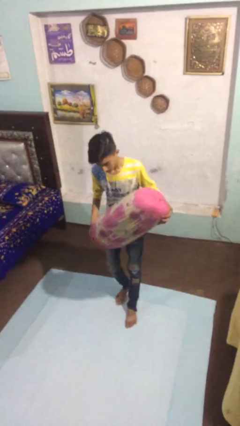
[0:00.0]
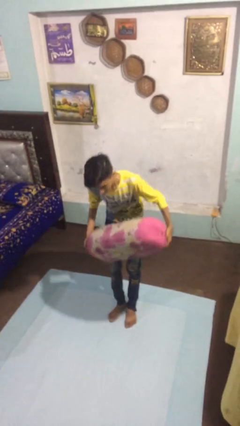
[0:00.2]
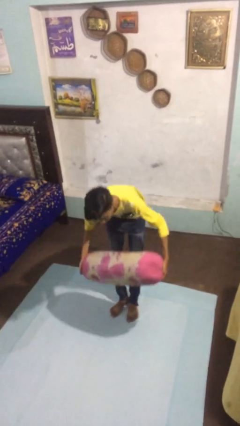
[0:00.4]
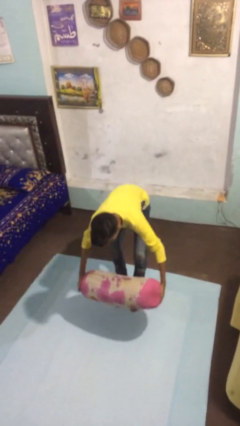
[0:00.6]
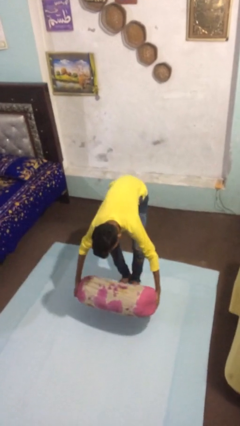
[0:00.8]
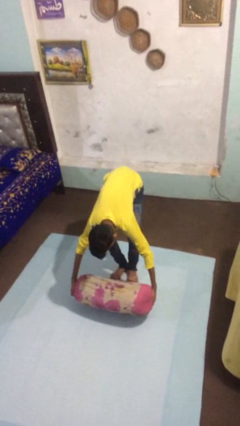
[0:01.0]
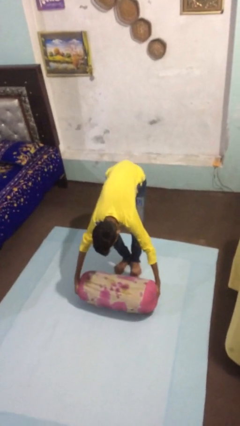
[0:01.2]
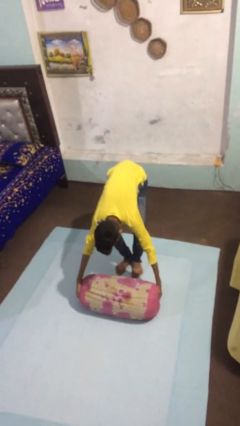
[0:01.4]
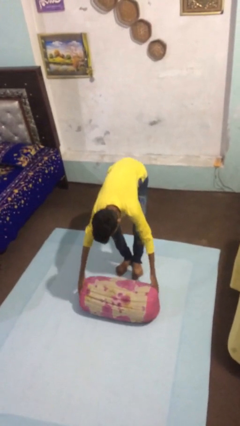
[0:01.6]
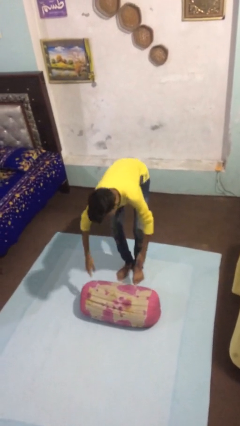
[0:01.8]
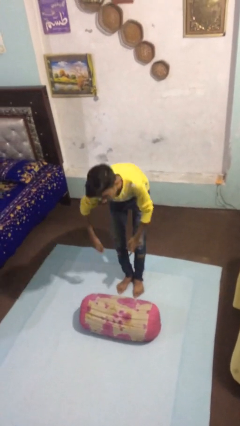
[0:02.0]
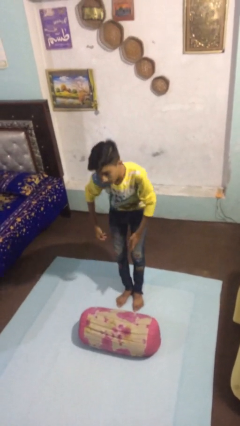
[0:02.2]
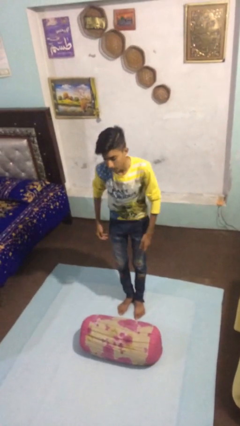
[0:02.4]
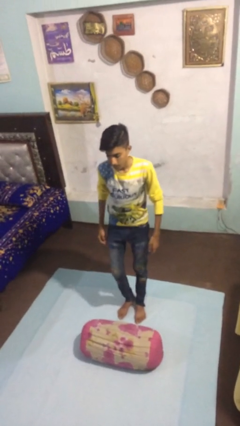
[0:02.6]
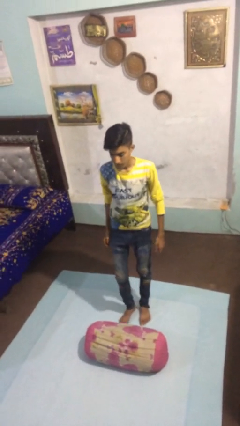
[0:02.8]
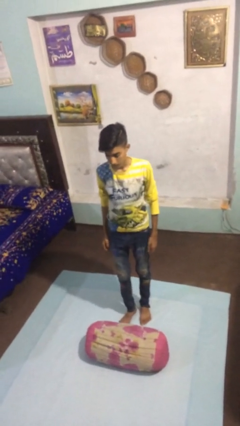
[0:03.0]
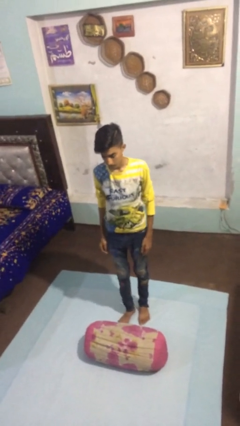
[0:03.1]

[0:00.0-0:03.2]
person puts down object on floor

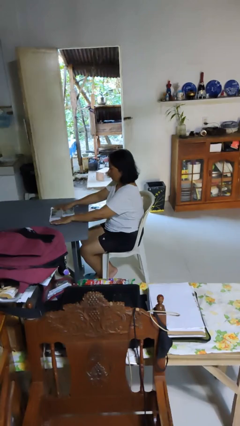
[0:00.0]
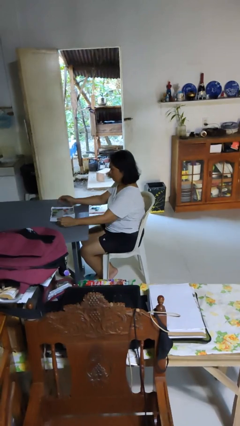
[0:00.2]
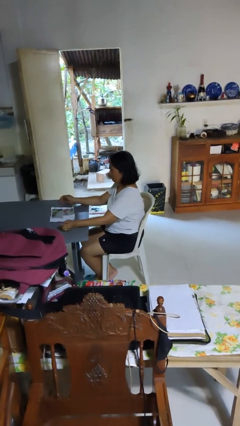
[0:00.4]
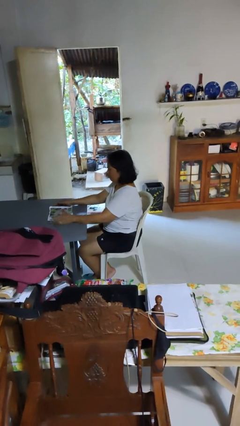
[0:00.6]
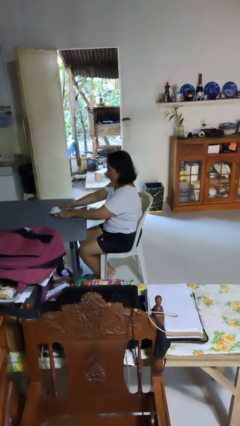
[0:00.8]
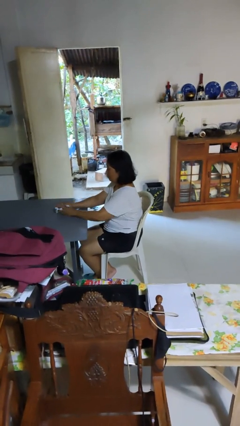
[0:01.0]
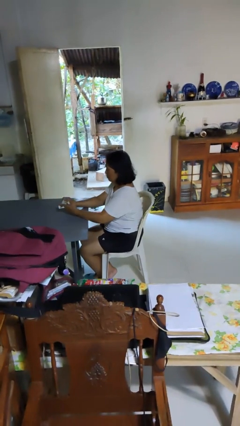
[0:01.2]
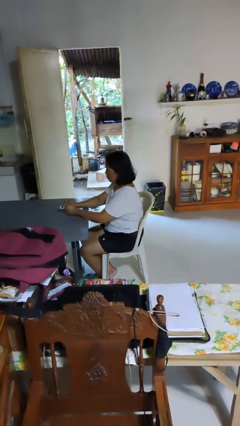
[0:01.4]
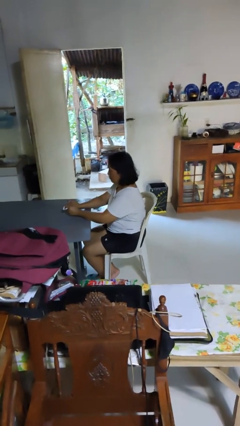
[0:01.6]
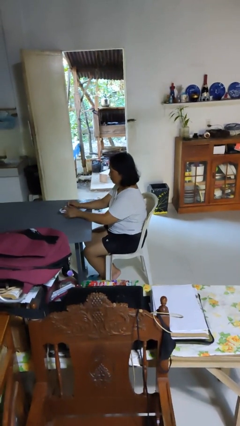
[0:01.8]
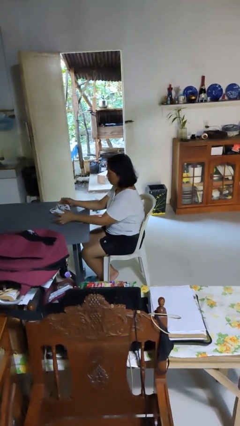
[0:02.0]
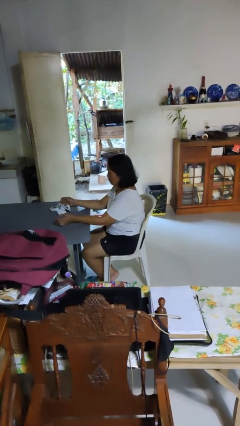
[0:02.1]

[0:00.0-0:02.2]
person crumples paper

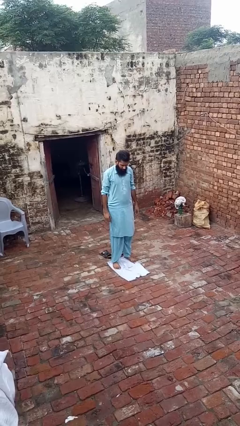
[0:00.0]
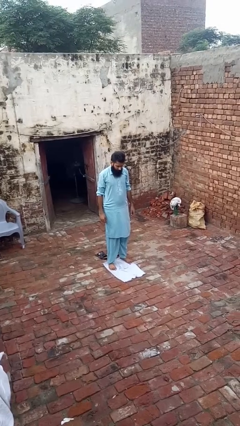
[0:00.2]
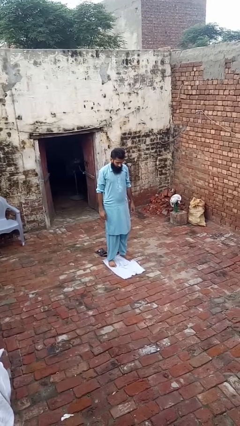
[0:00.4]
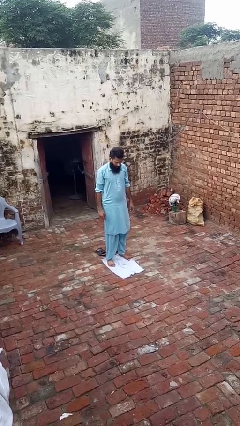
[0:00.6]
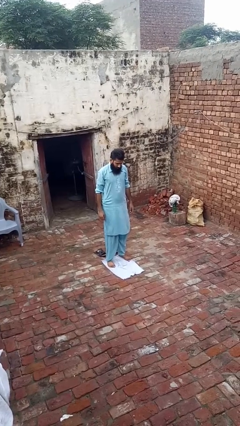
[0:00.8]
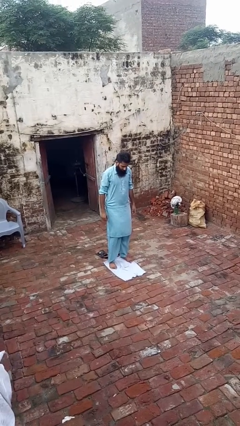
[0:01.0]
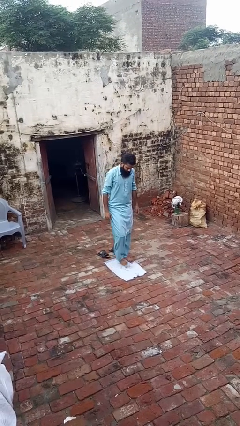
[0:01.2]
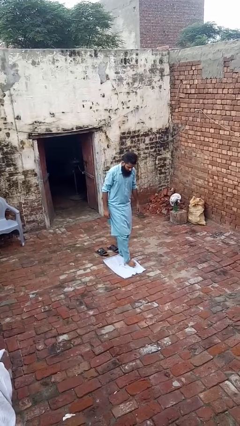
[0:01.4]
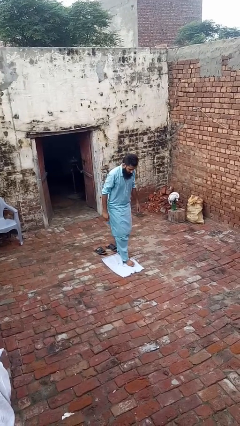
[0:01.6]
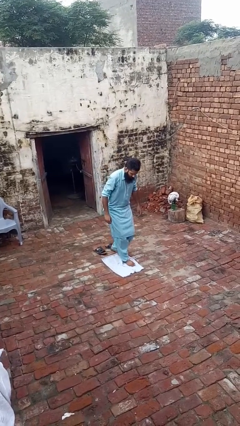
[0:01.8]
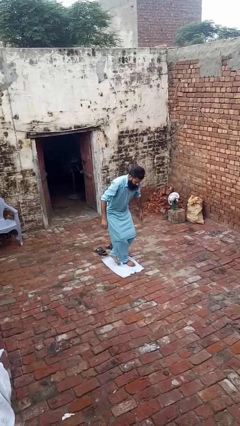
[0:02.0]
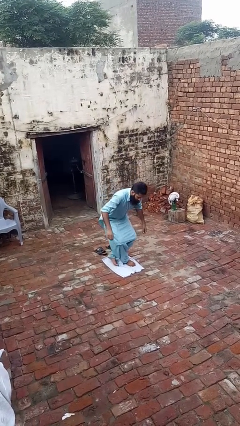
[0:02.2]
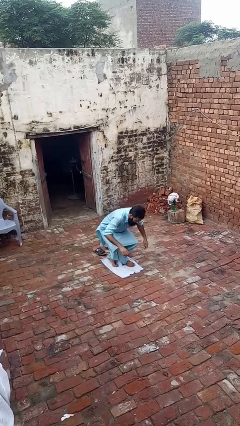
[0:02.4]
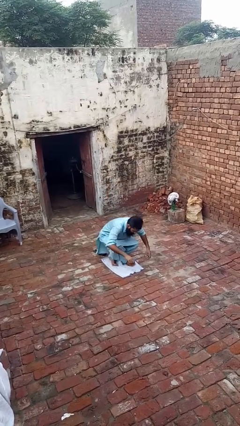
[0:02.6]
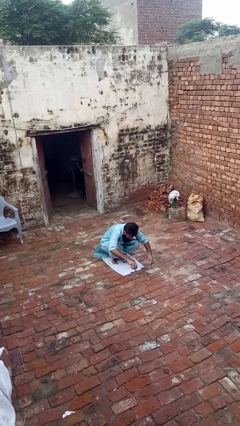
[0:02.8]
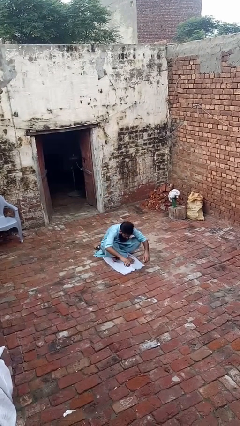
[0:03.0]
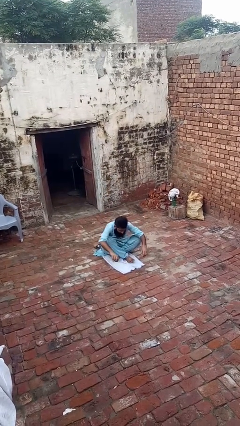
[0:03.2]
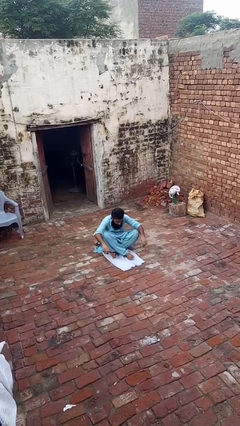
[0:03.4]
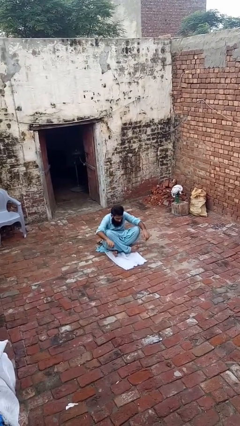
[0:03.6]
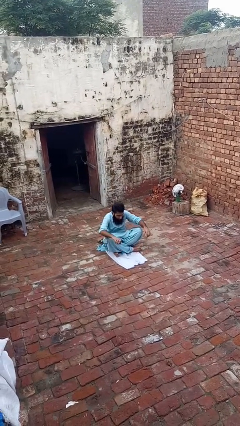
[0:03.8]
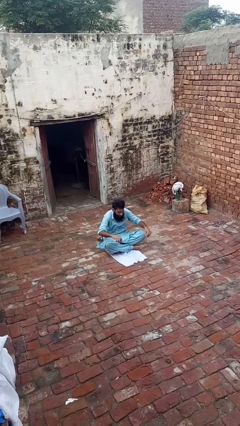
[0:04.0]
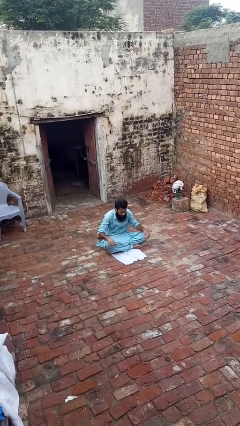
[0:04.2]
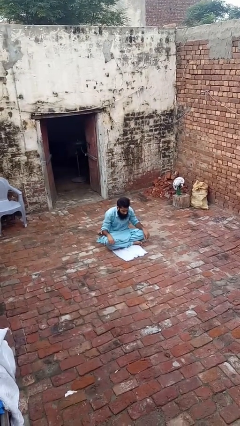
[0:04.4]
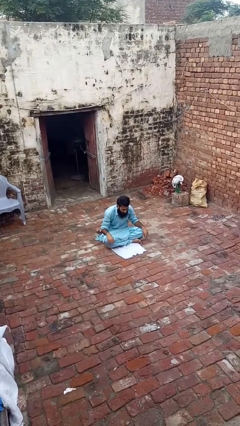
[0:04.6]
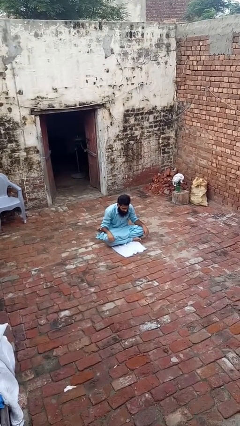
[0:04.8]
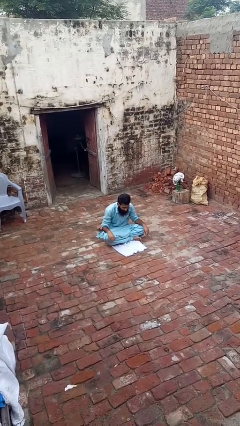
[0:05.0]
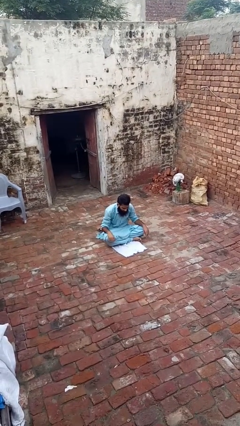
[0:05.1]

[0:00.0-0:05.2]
person sits crisscross

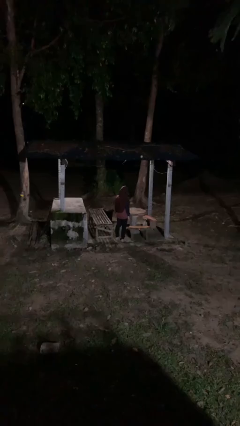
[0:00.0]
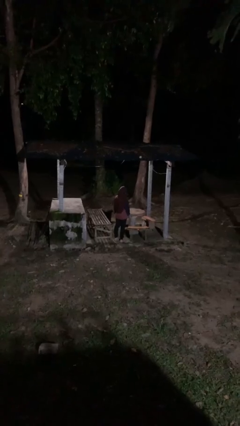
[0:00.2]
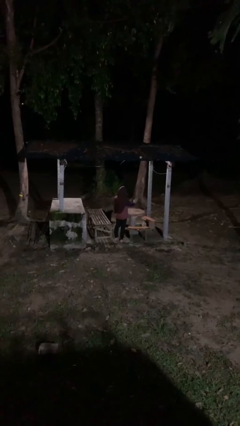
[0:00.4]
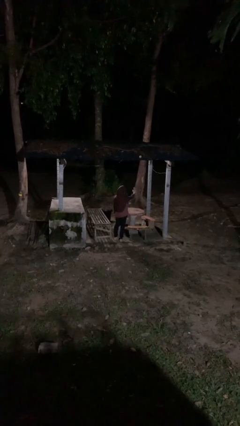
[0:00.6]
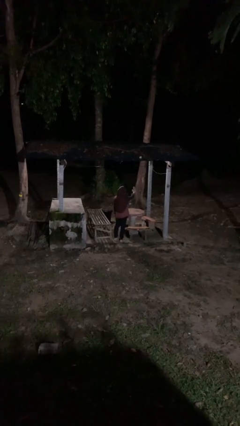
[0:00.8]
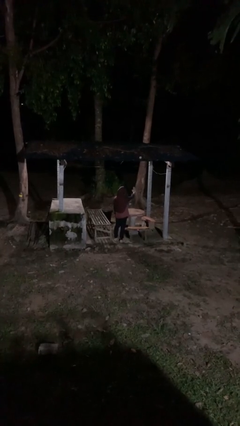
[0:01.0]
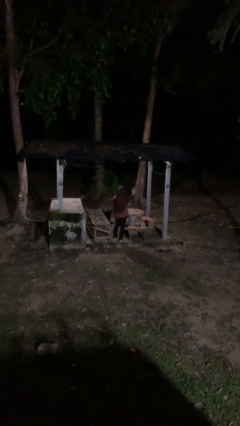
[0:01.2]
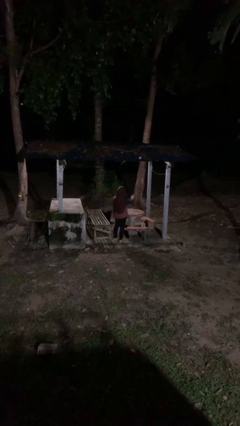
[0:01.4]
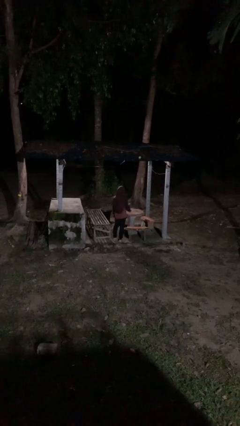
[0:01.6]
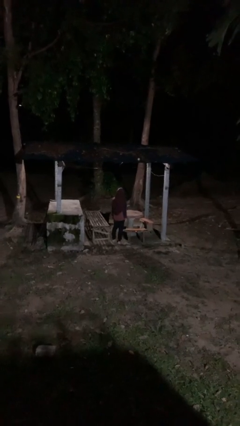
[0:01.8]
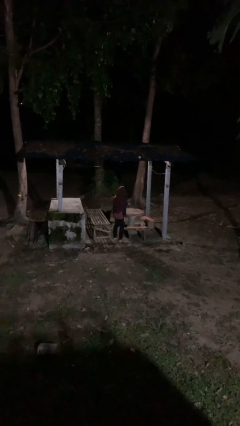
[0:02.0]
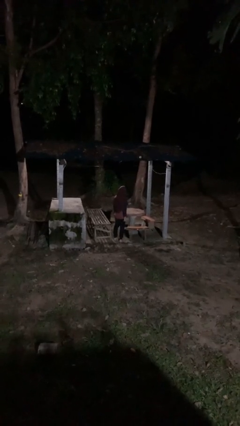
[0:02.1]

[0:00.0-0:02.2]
person gestures stop

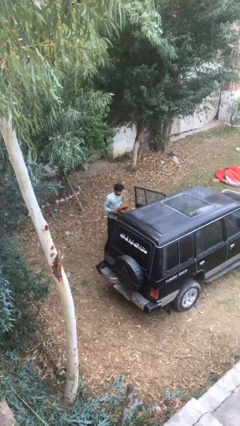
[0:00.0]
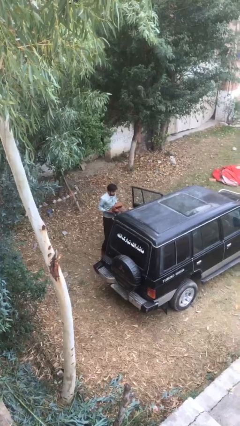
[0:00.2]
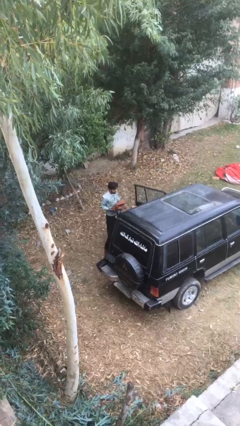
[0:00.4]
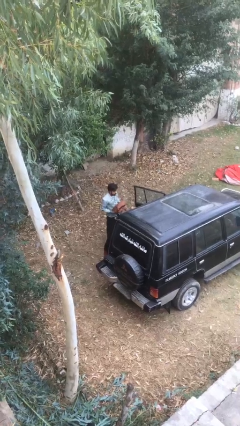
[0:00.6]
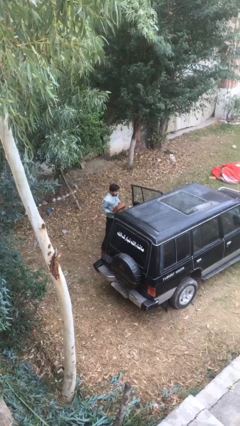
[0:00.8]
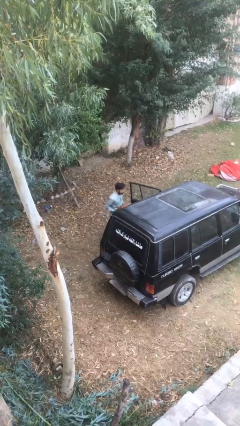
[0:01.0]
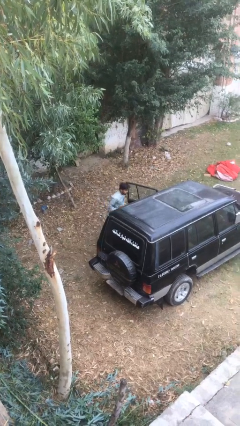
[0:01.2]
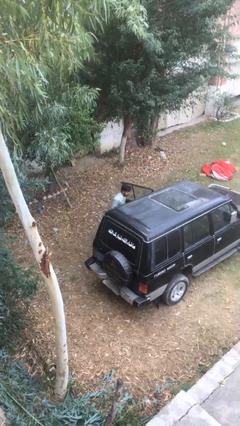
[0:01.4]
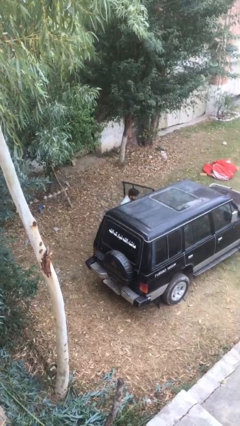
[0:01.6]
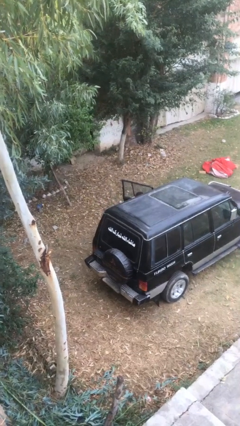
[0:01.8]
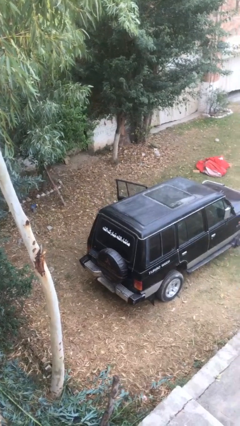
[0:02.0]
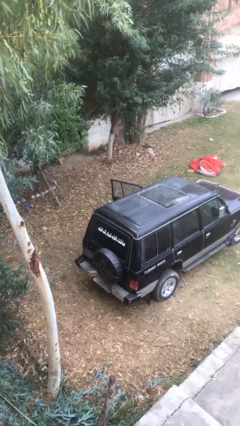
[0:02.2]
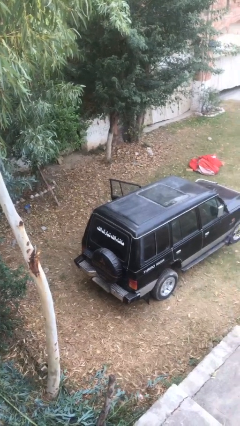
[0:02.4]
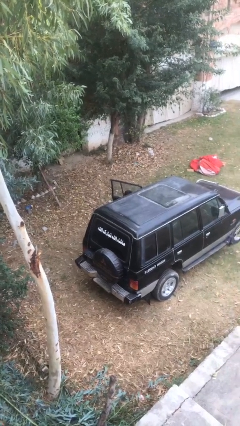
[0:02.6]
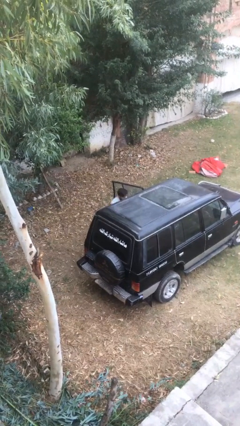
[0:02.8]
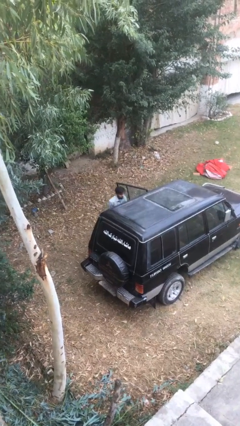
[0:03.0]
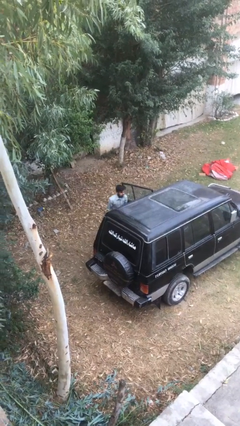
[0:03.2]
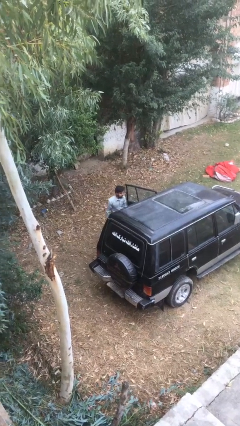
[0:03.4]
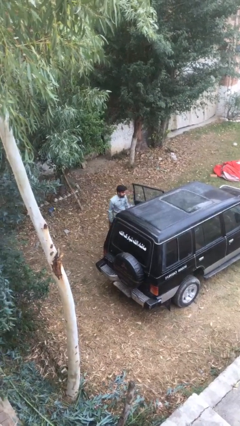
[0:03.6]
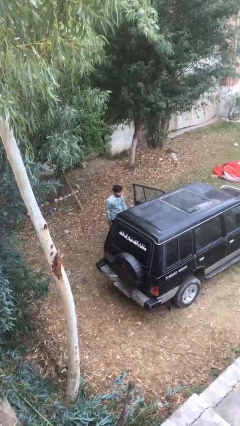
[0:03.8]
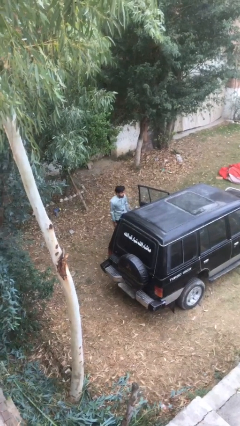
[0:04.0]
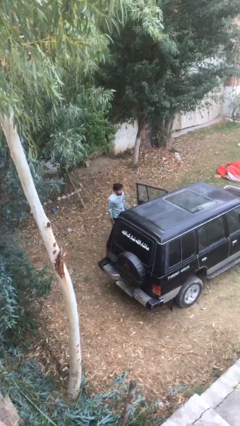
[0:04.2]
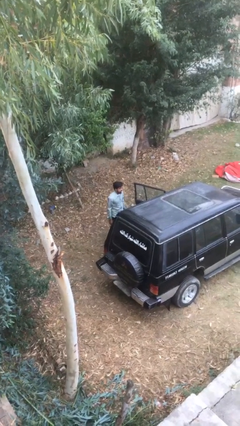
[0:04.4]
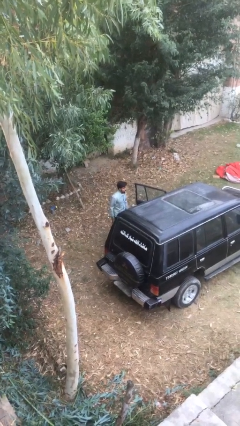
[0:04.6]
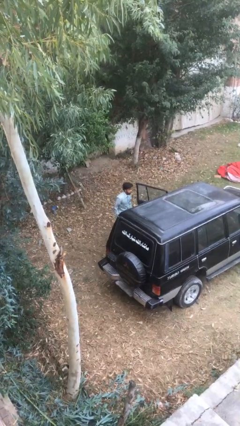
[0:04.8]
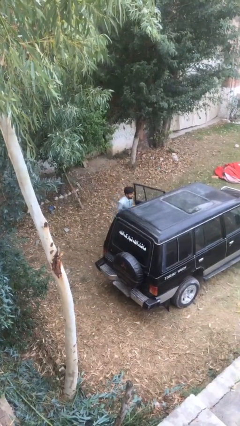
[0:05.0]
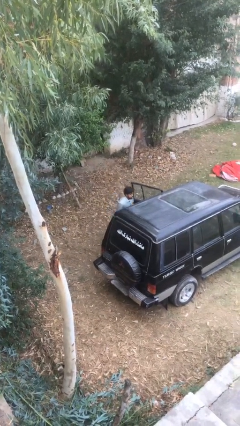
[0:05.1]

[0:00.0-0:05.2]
person loads car

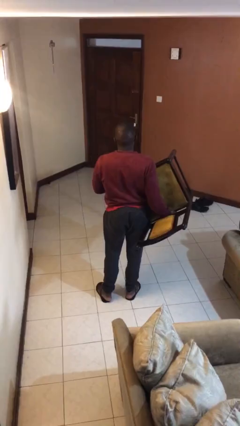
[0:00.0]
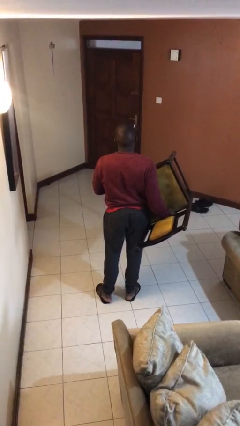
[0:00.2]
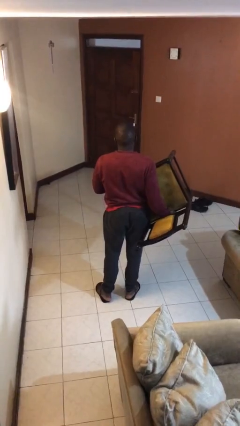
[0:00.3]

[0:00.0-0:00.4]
person carries furniture
